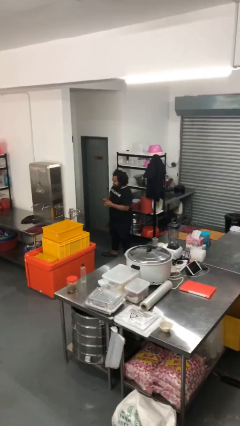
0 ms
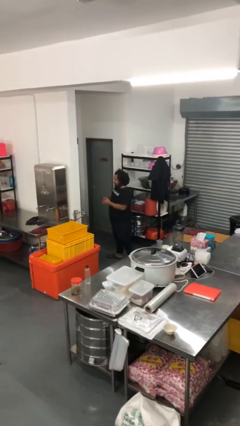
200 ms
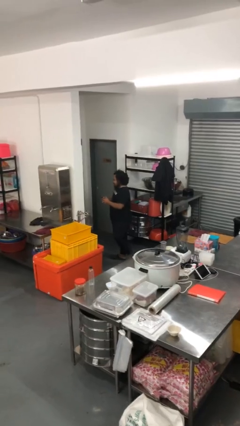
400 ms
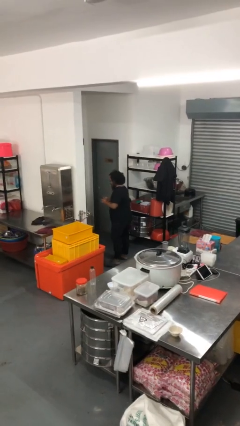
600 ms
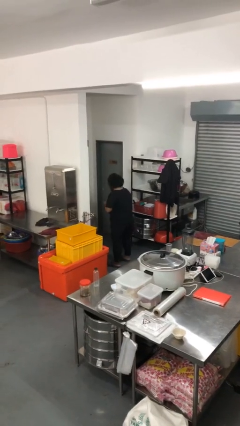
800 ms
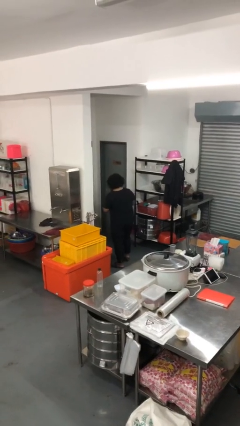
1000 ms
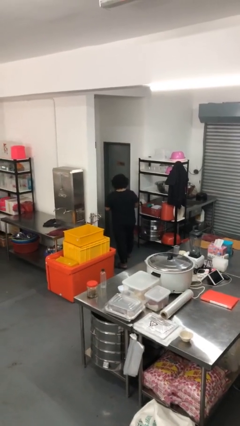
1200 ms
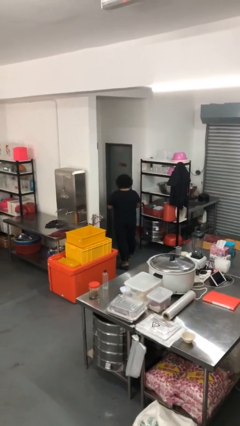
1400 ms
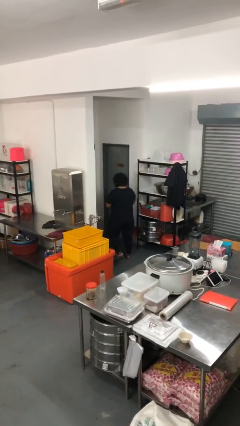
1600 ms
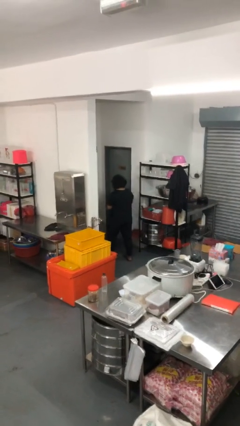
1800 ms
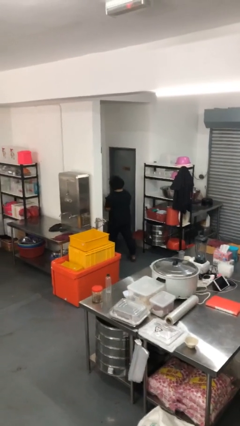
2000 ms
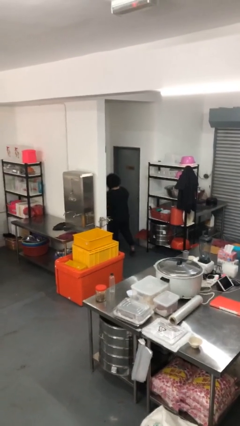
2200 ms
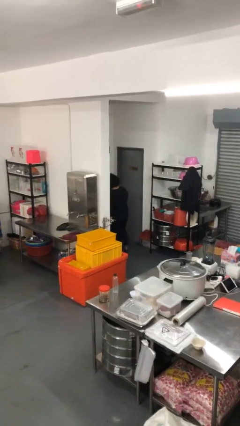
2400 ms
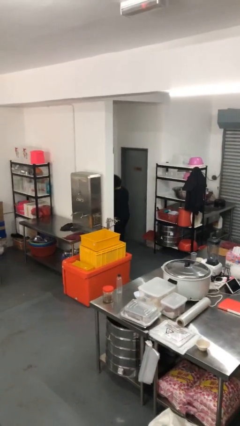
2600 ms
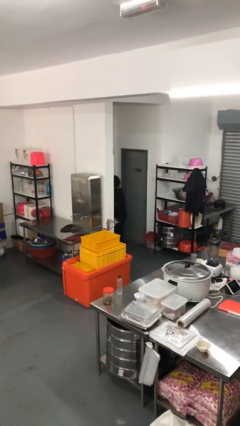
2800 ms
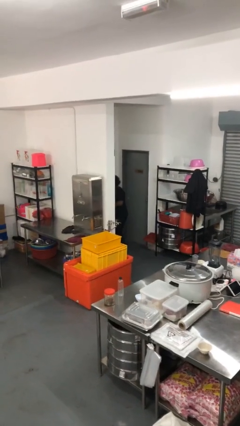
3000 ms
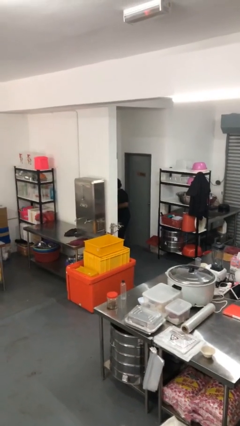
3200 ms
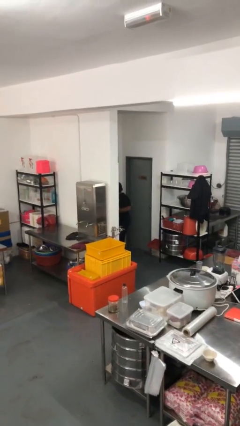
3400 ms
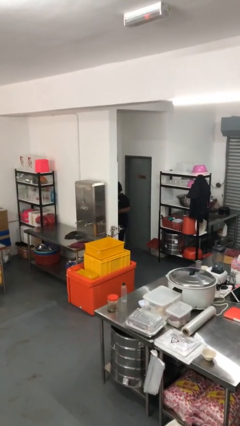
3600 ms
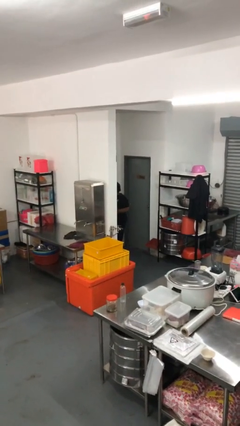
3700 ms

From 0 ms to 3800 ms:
person exits scene through structure

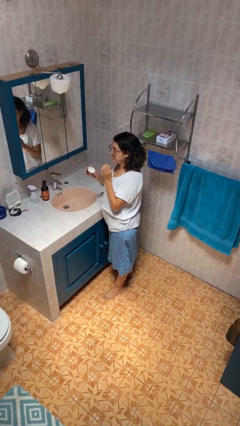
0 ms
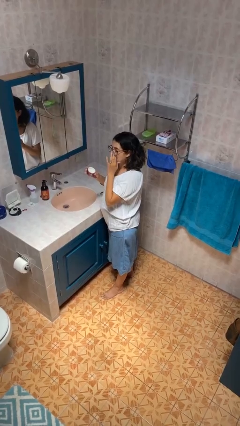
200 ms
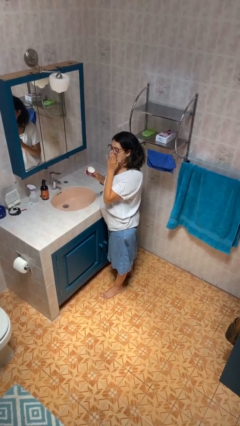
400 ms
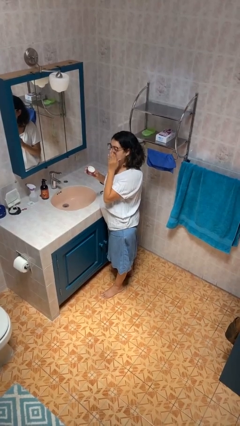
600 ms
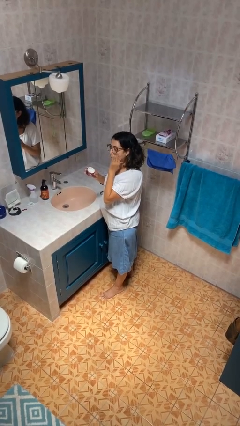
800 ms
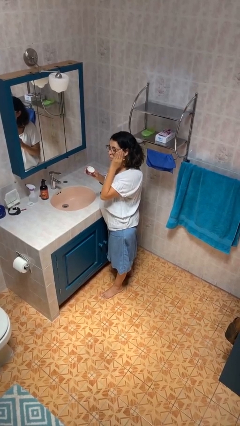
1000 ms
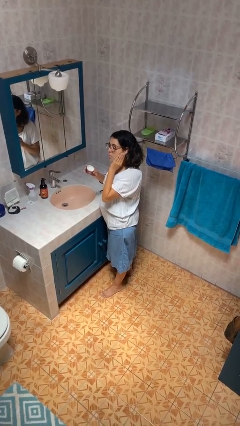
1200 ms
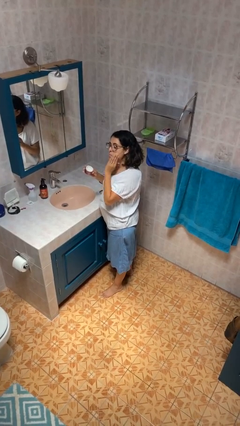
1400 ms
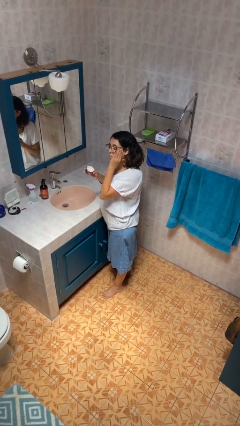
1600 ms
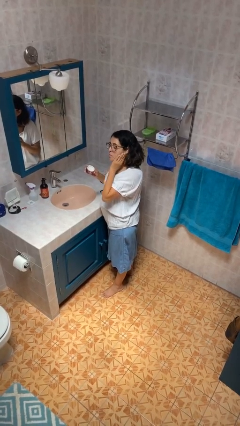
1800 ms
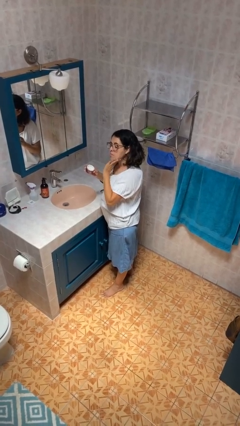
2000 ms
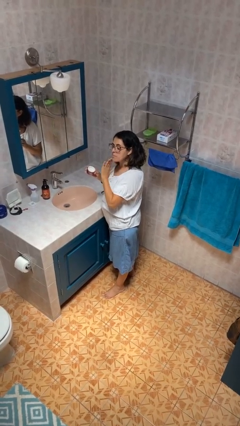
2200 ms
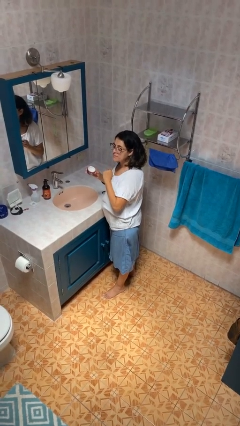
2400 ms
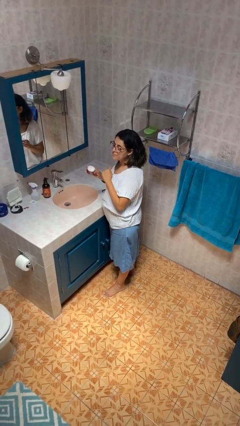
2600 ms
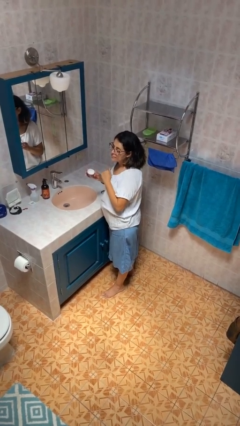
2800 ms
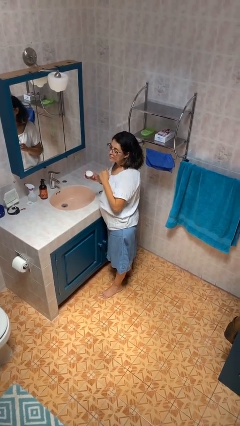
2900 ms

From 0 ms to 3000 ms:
person applies facial moisturizer

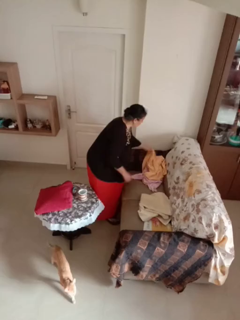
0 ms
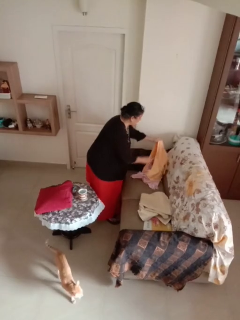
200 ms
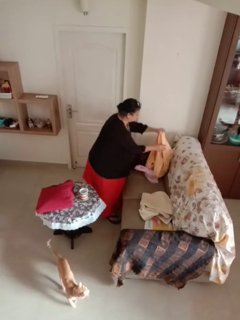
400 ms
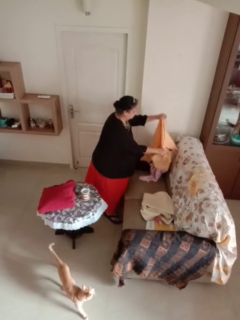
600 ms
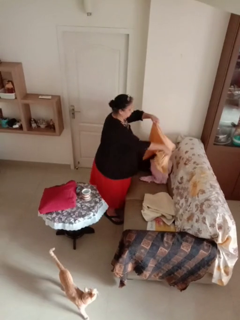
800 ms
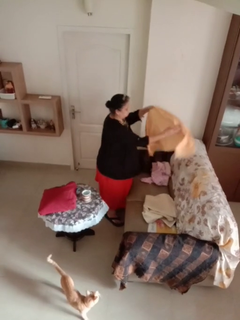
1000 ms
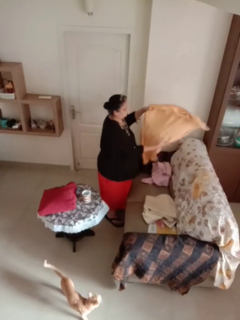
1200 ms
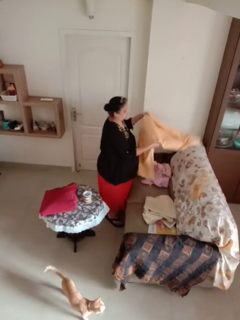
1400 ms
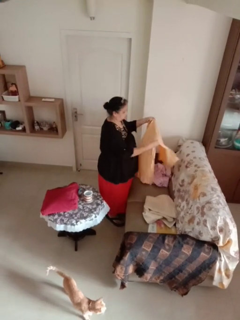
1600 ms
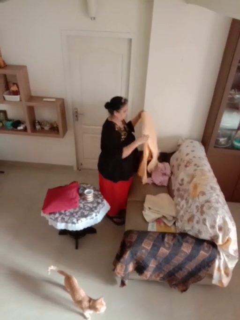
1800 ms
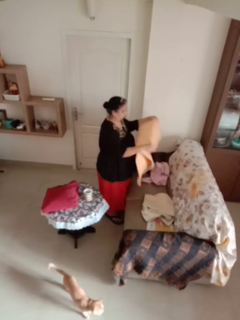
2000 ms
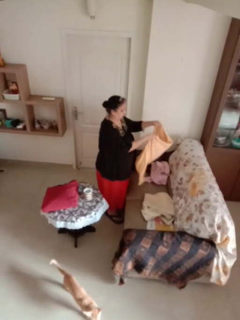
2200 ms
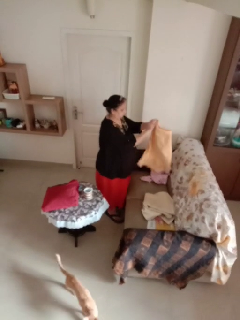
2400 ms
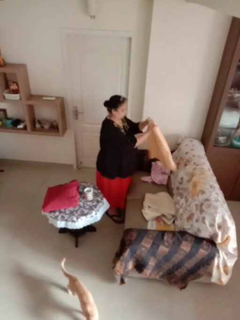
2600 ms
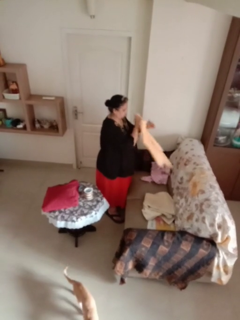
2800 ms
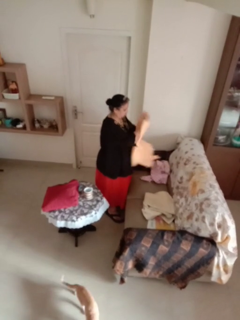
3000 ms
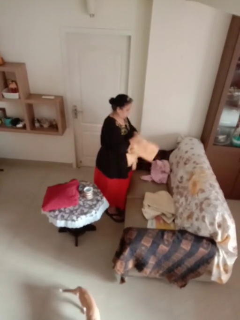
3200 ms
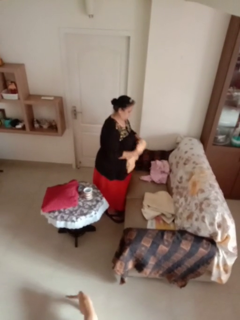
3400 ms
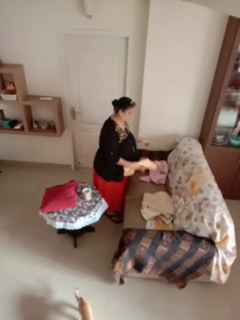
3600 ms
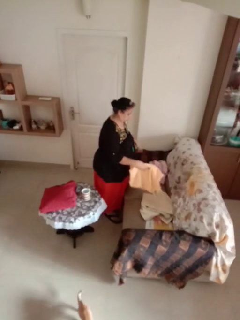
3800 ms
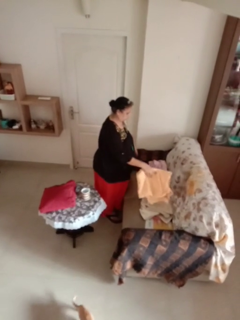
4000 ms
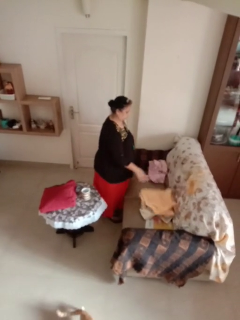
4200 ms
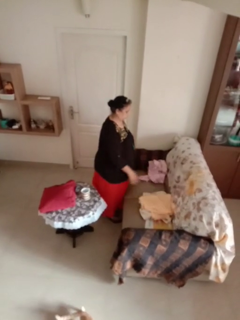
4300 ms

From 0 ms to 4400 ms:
person folds towel

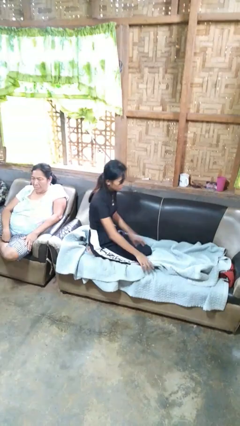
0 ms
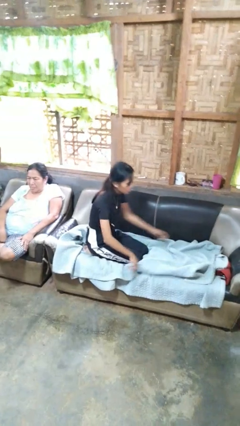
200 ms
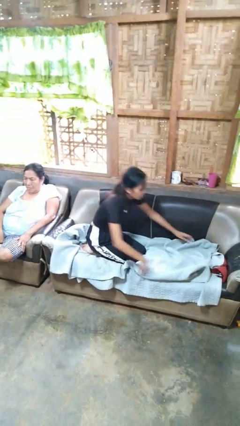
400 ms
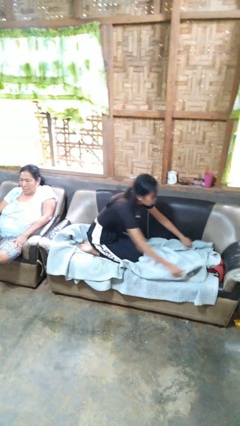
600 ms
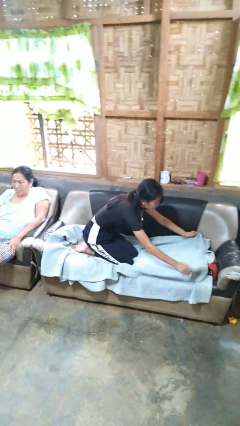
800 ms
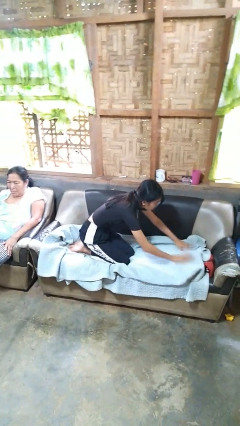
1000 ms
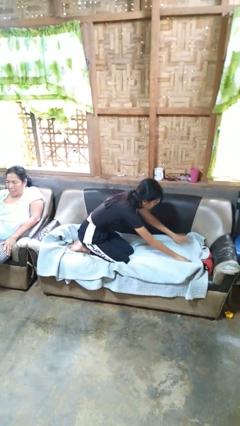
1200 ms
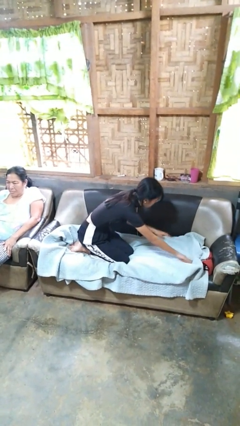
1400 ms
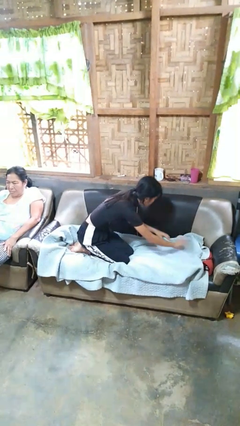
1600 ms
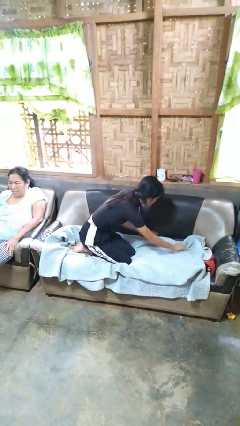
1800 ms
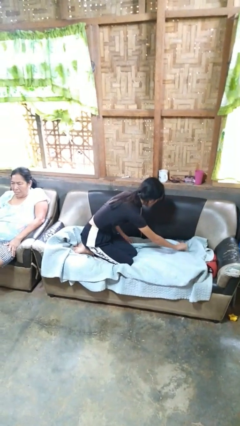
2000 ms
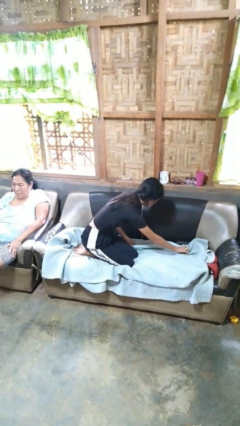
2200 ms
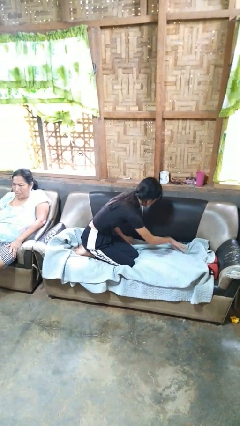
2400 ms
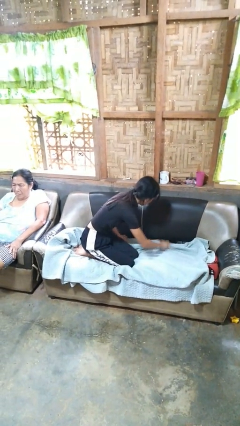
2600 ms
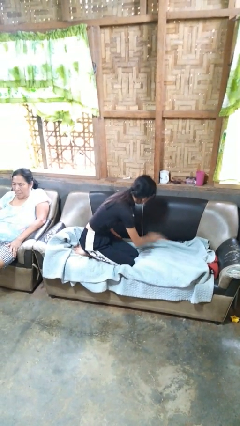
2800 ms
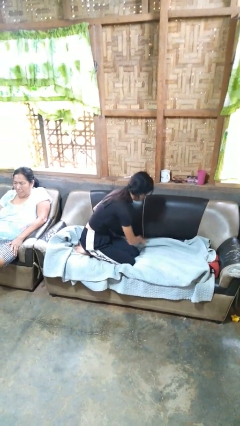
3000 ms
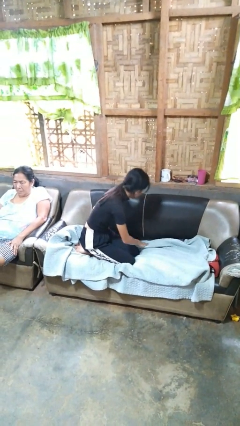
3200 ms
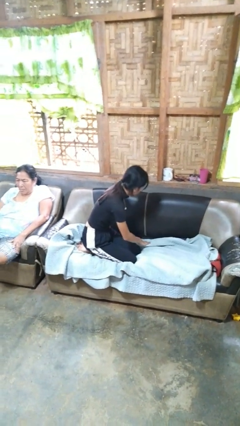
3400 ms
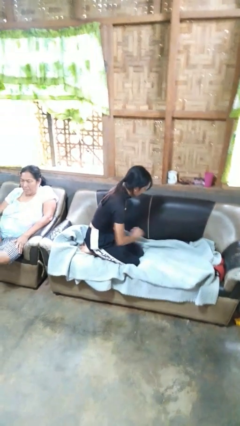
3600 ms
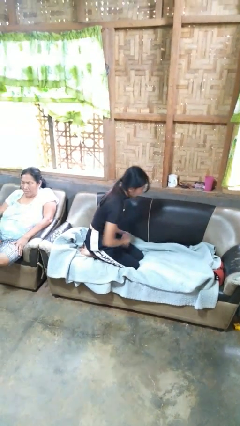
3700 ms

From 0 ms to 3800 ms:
person searches in couch

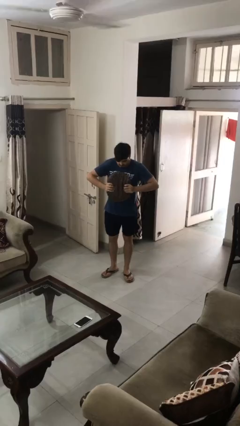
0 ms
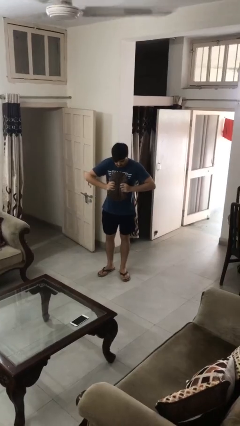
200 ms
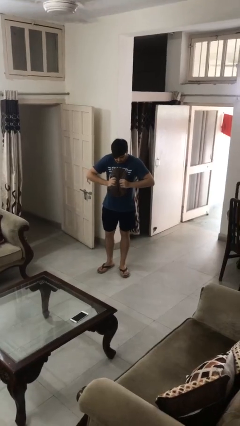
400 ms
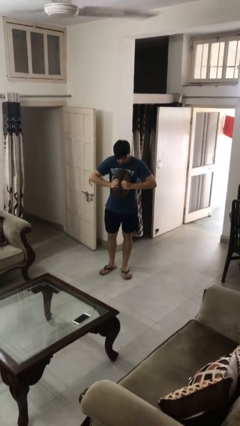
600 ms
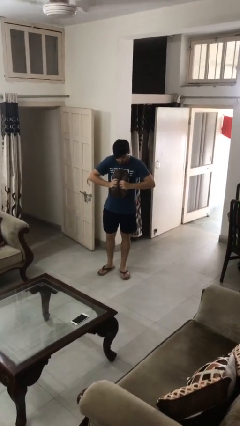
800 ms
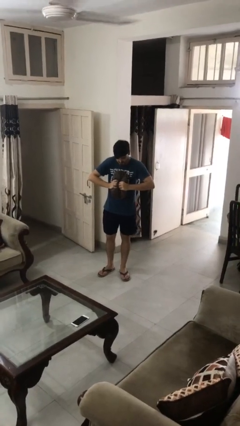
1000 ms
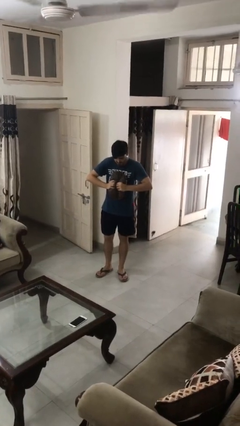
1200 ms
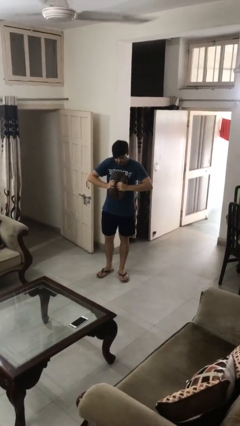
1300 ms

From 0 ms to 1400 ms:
person squeezes object

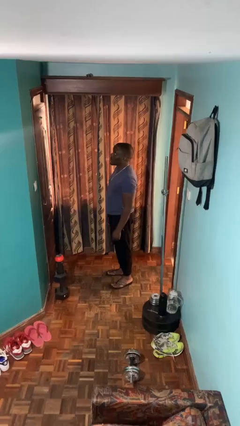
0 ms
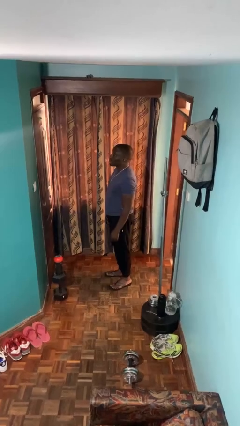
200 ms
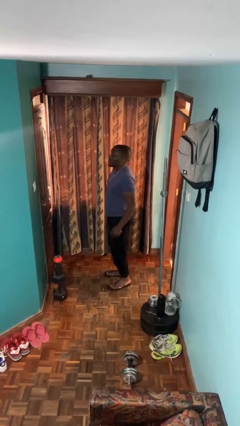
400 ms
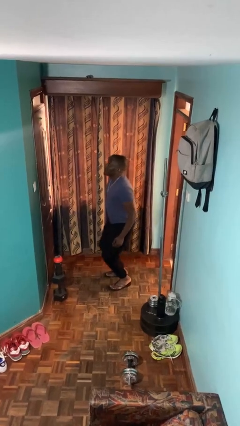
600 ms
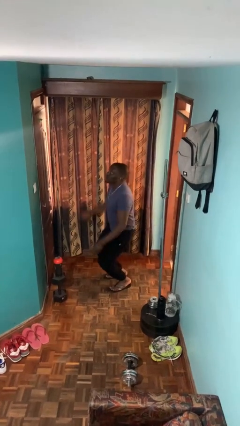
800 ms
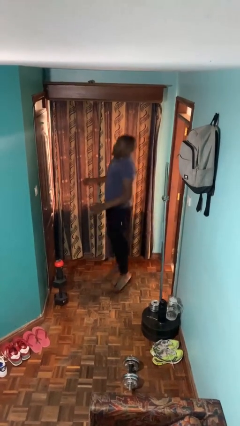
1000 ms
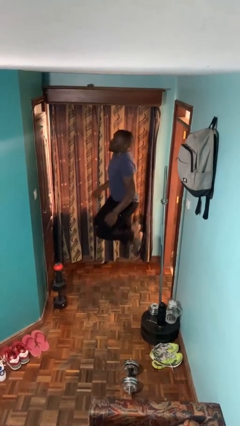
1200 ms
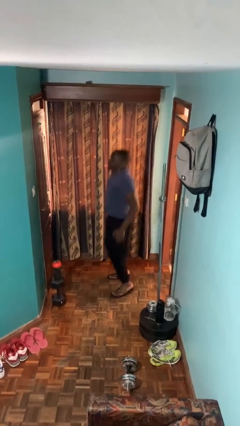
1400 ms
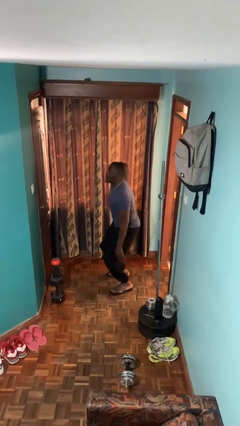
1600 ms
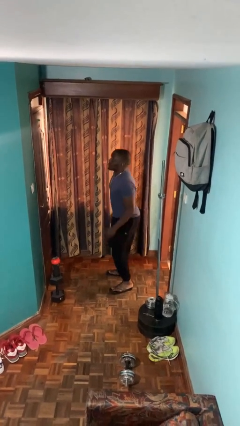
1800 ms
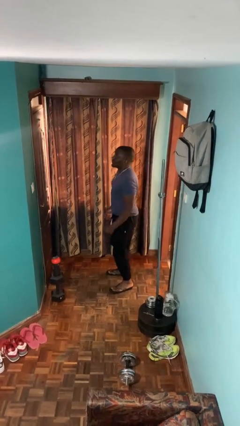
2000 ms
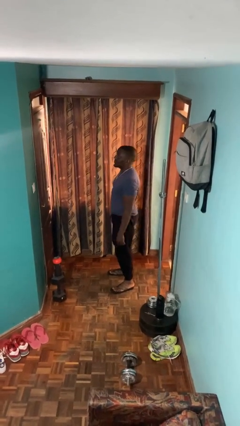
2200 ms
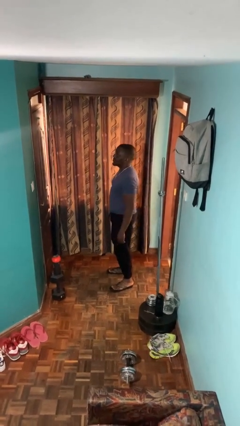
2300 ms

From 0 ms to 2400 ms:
person jumps
